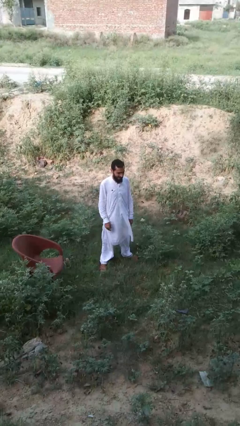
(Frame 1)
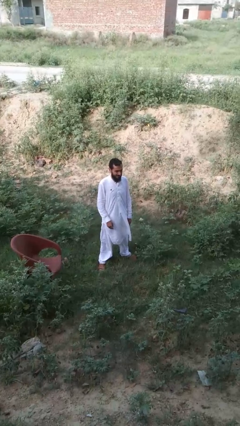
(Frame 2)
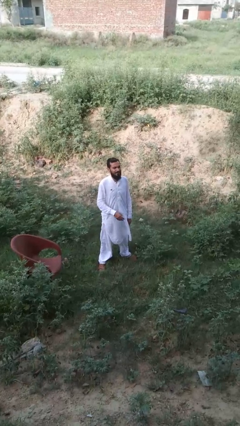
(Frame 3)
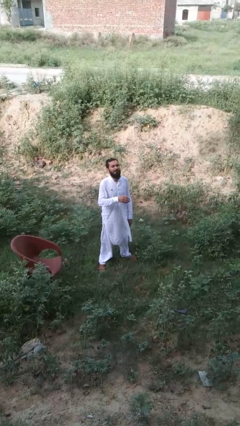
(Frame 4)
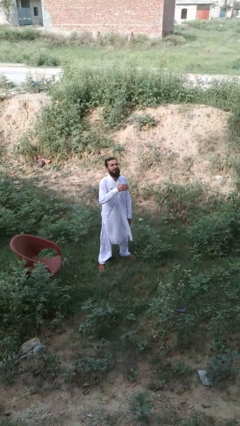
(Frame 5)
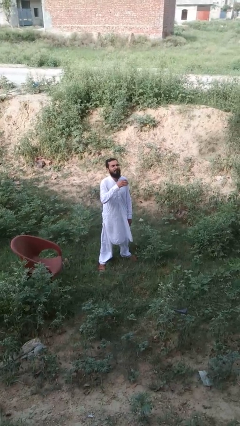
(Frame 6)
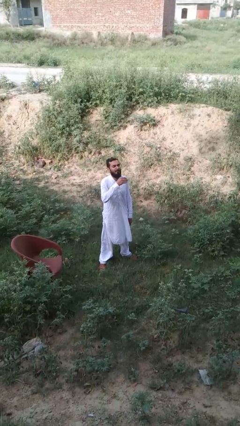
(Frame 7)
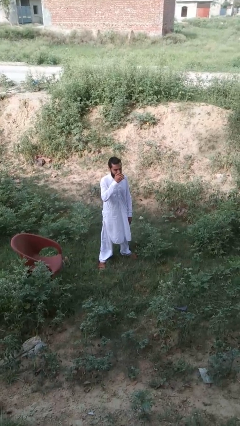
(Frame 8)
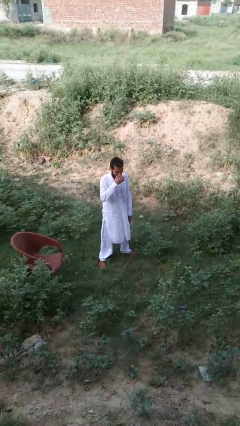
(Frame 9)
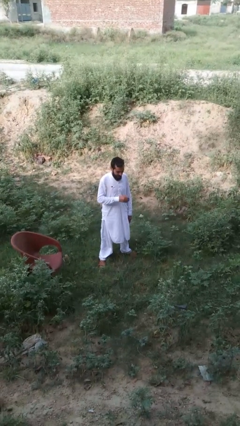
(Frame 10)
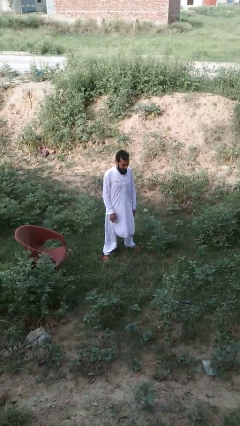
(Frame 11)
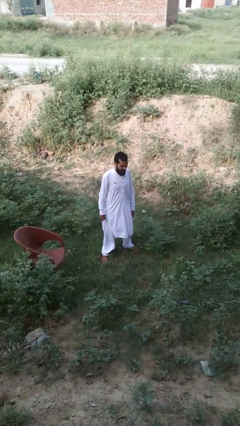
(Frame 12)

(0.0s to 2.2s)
person sneezes into hand

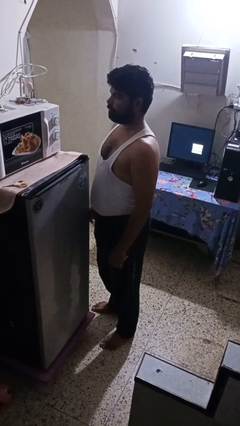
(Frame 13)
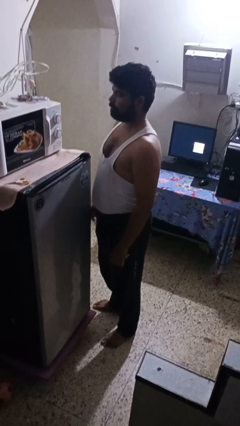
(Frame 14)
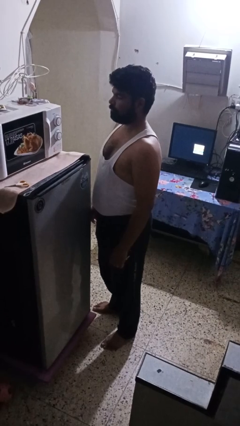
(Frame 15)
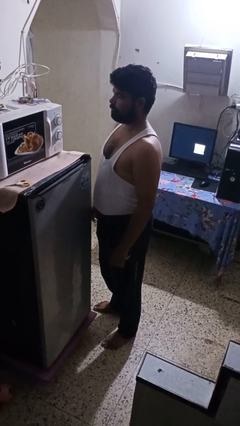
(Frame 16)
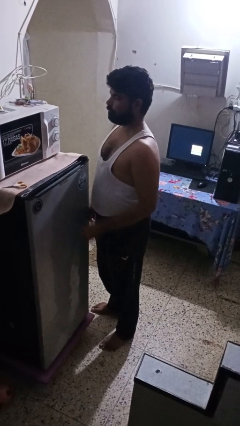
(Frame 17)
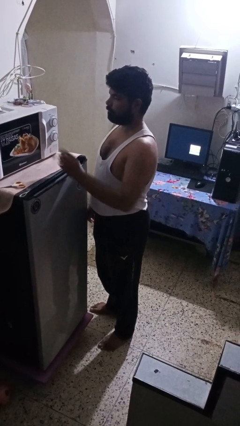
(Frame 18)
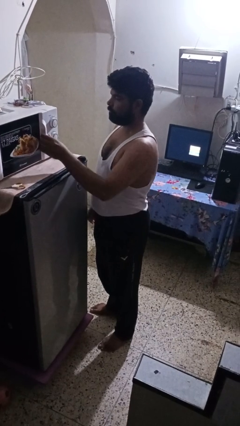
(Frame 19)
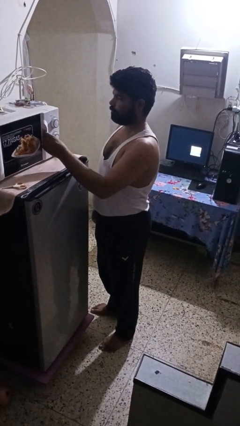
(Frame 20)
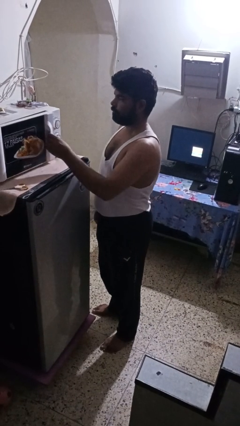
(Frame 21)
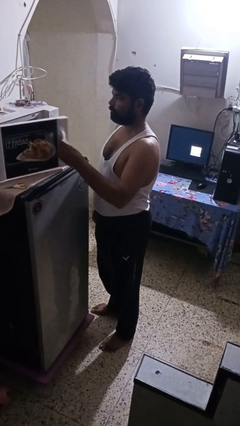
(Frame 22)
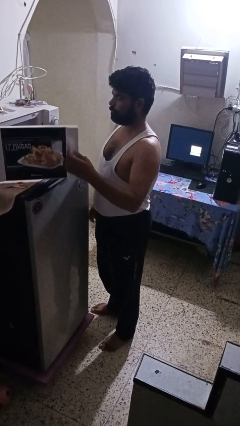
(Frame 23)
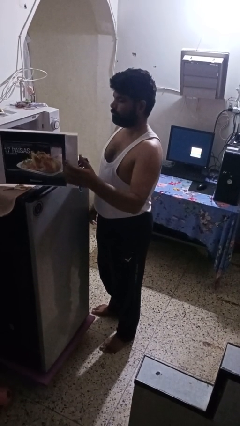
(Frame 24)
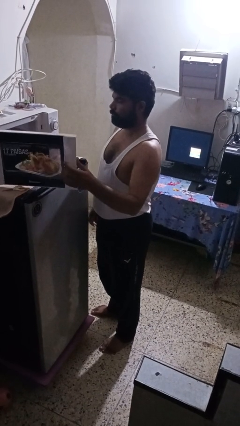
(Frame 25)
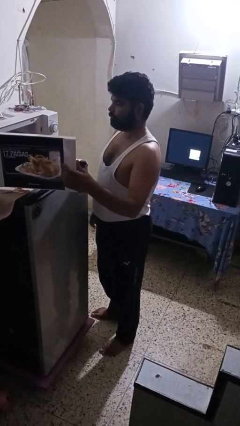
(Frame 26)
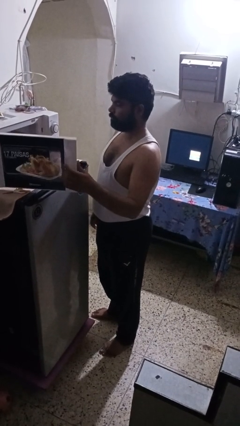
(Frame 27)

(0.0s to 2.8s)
person opens microwave

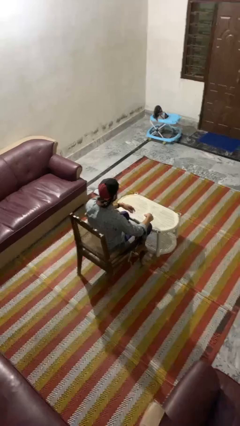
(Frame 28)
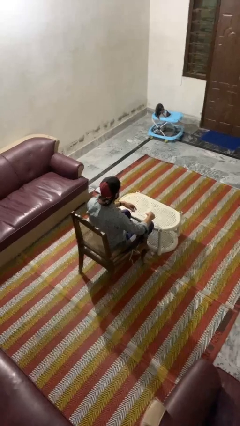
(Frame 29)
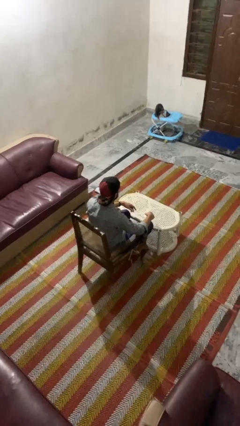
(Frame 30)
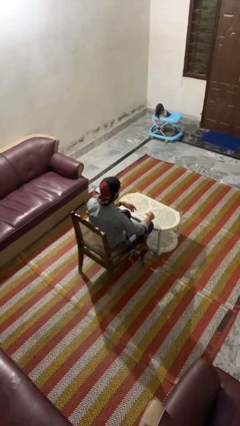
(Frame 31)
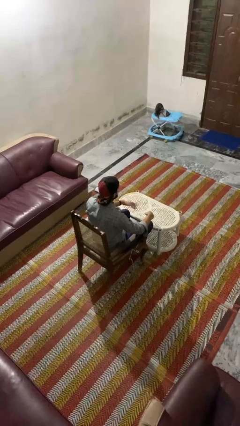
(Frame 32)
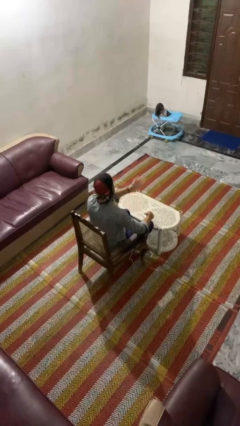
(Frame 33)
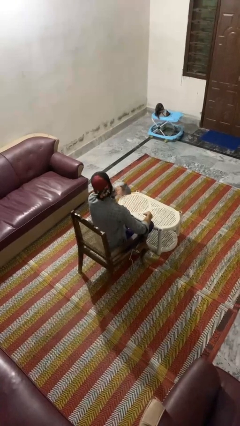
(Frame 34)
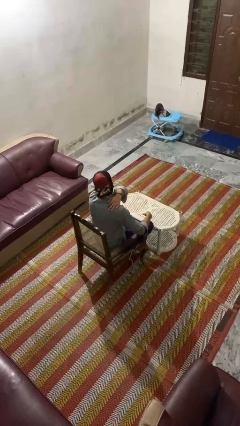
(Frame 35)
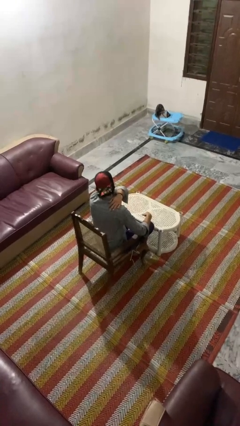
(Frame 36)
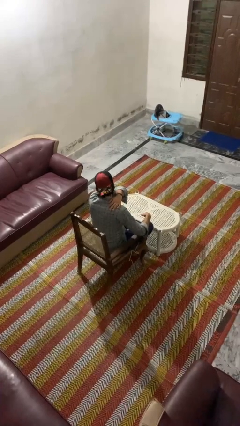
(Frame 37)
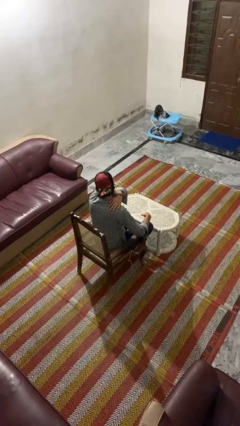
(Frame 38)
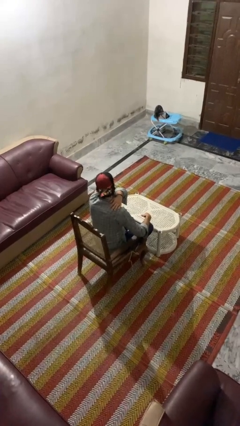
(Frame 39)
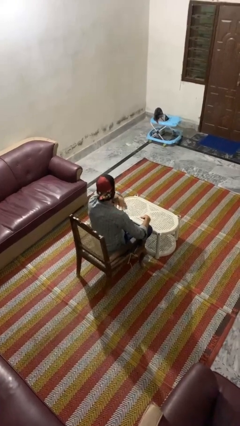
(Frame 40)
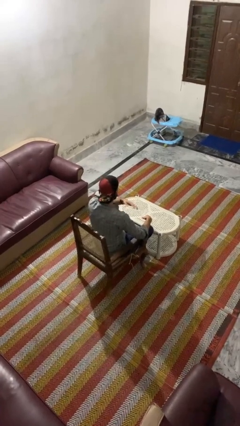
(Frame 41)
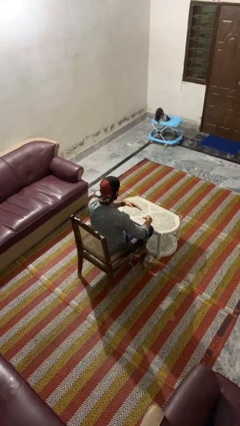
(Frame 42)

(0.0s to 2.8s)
person swats bug

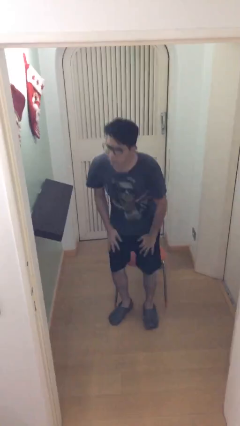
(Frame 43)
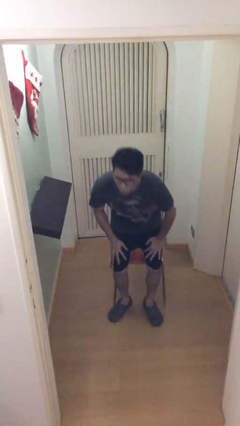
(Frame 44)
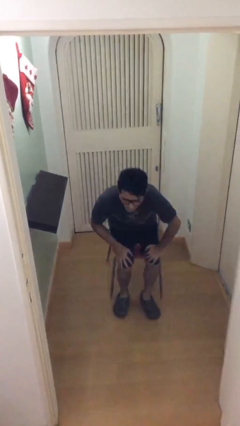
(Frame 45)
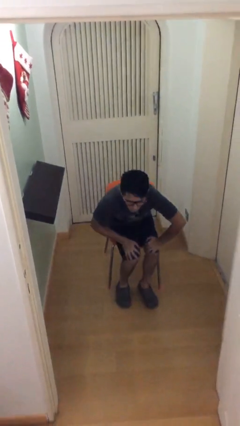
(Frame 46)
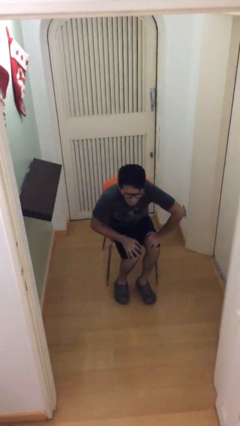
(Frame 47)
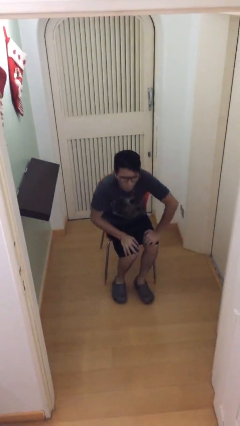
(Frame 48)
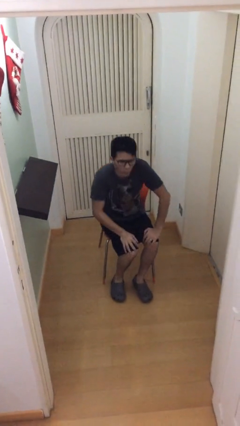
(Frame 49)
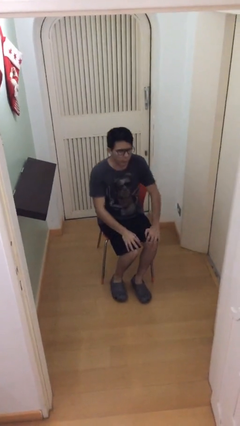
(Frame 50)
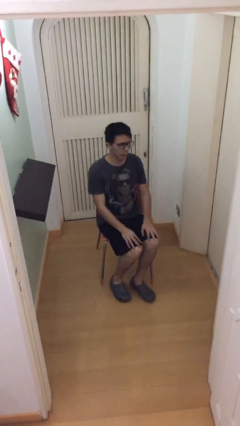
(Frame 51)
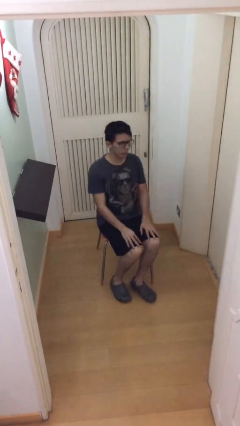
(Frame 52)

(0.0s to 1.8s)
person sits down

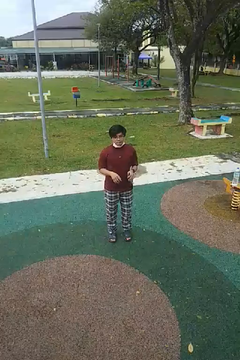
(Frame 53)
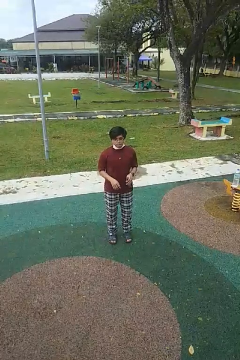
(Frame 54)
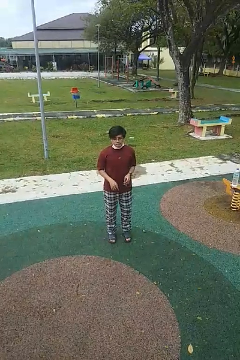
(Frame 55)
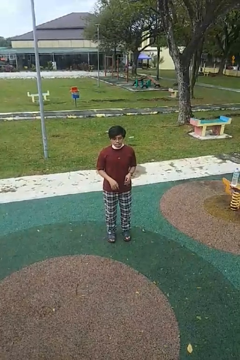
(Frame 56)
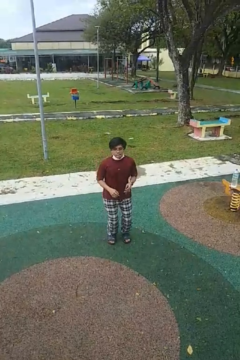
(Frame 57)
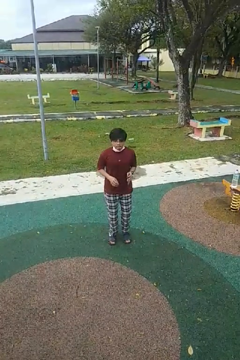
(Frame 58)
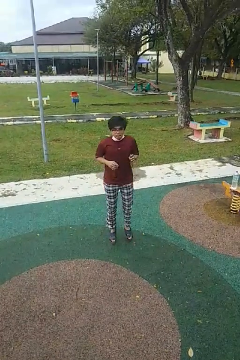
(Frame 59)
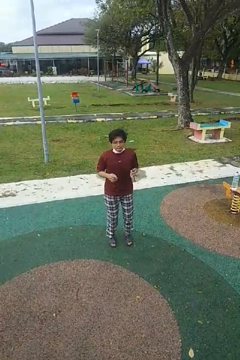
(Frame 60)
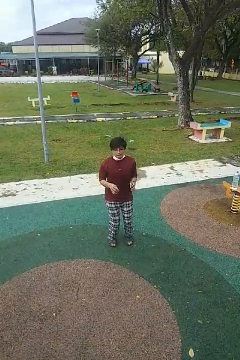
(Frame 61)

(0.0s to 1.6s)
person jumps

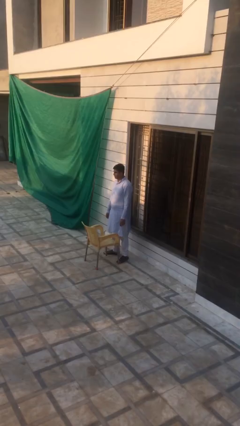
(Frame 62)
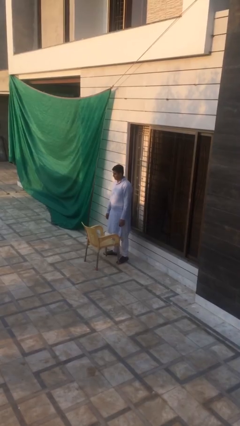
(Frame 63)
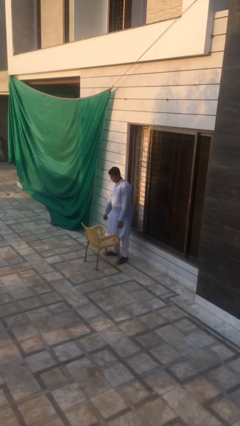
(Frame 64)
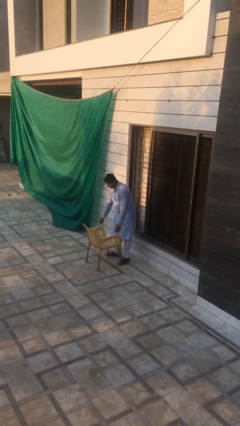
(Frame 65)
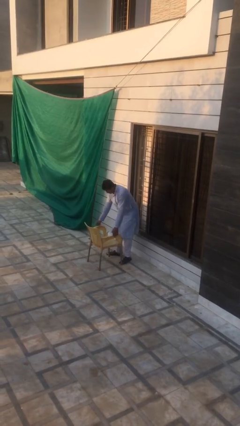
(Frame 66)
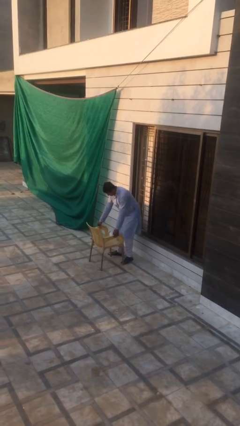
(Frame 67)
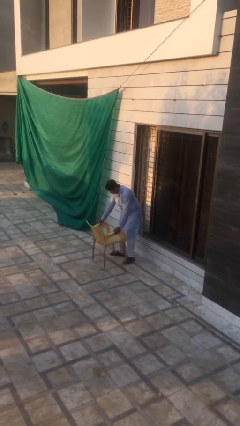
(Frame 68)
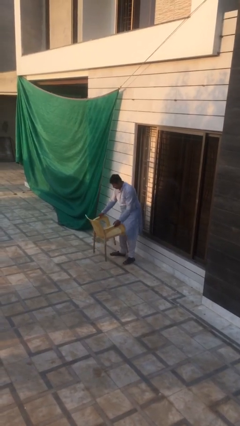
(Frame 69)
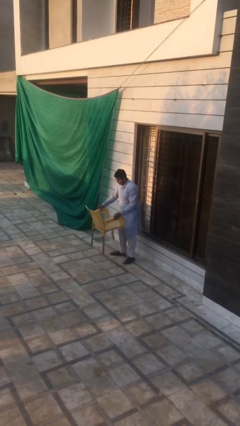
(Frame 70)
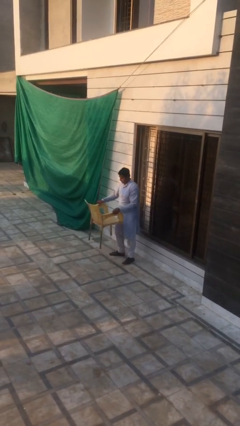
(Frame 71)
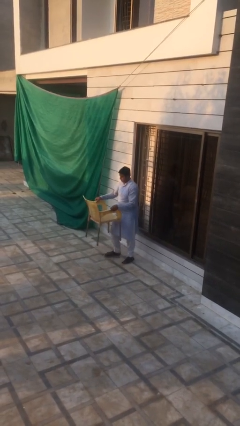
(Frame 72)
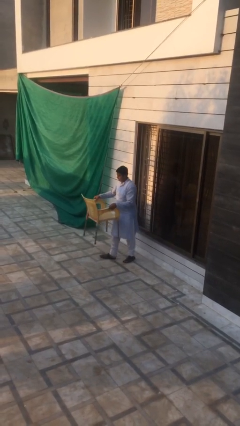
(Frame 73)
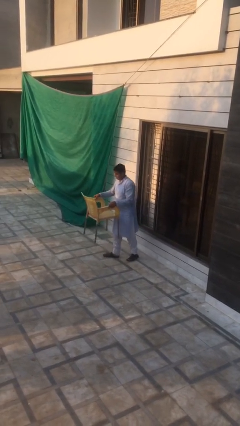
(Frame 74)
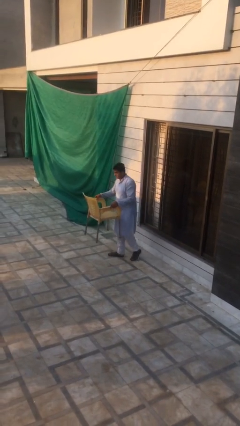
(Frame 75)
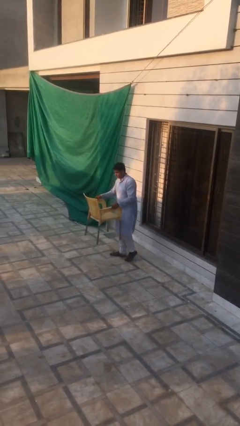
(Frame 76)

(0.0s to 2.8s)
person picks up object from floor

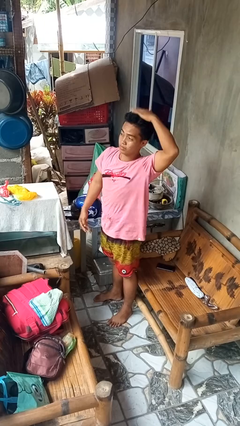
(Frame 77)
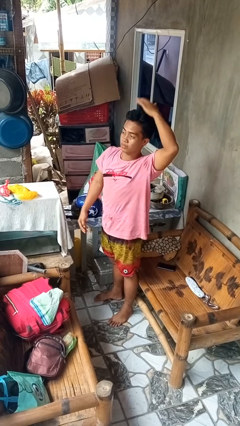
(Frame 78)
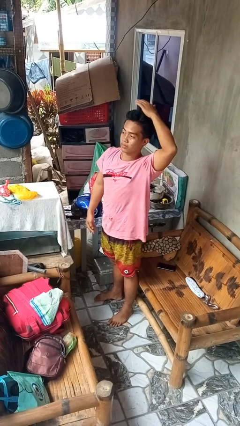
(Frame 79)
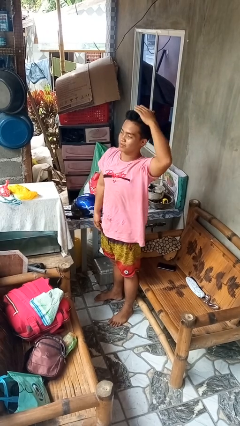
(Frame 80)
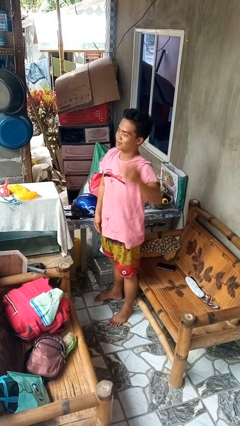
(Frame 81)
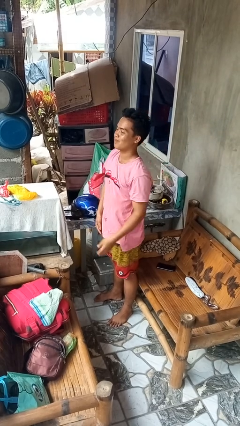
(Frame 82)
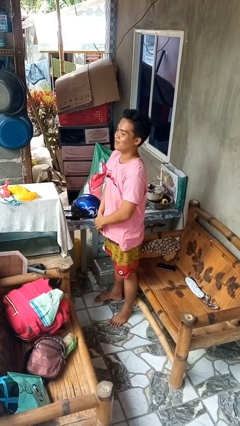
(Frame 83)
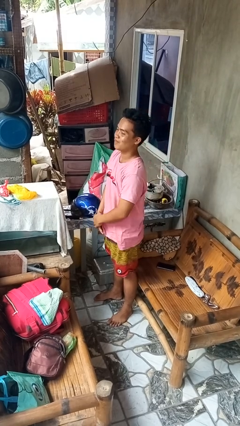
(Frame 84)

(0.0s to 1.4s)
person pats head

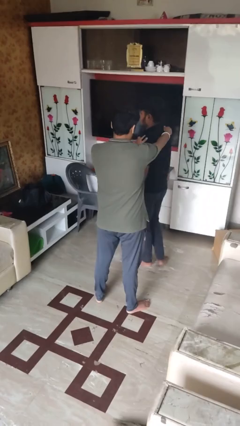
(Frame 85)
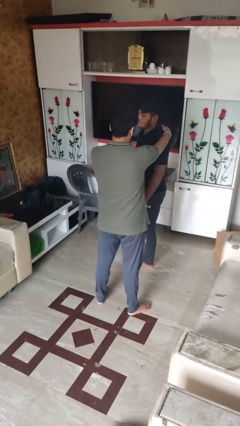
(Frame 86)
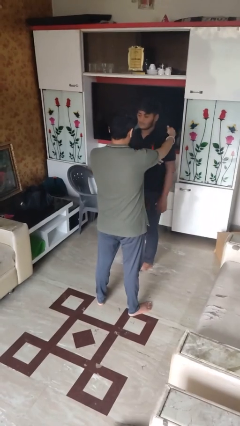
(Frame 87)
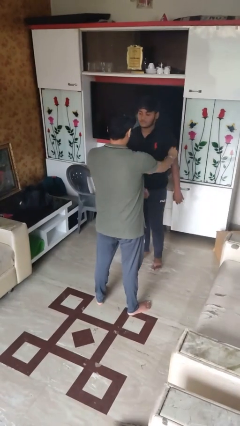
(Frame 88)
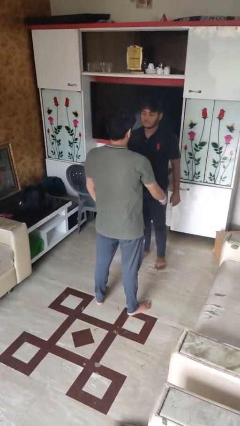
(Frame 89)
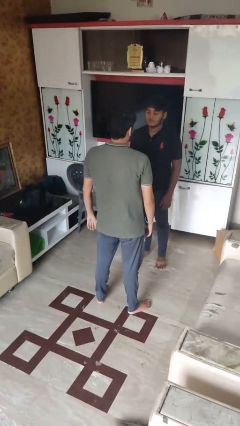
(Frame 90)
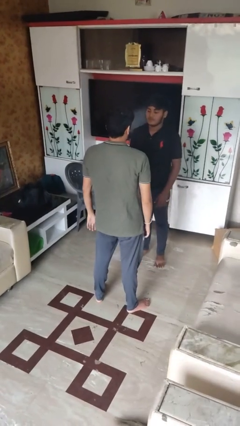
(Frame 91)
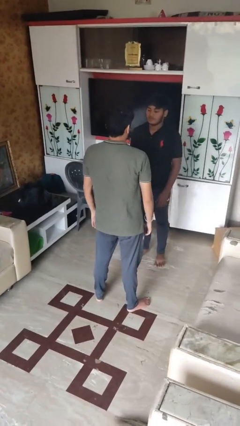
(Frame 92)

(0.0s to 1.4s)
person spins person around
